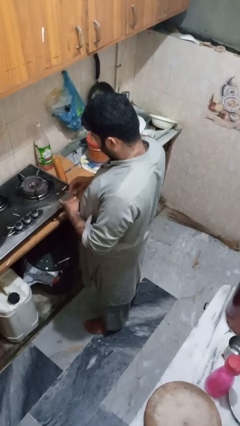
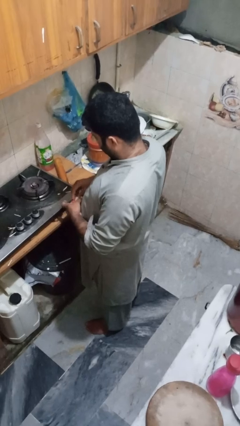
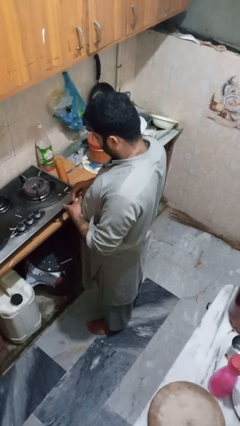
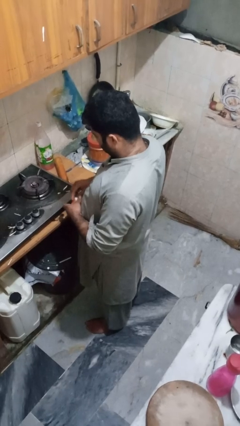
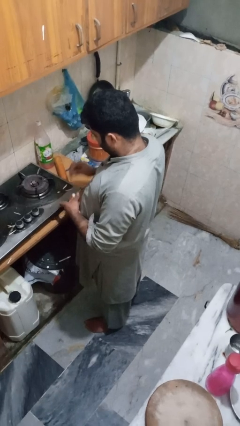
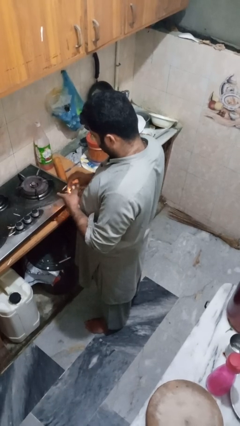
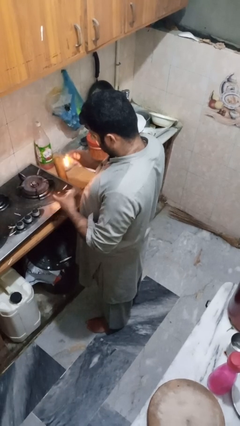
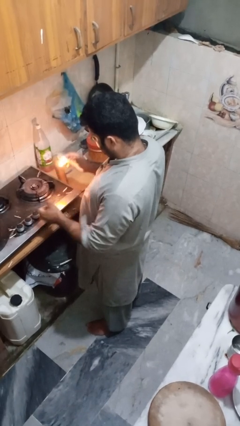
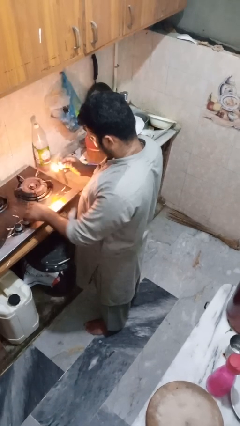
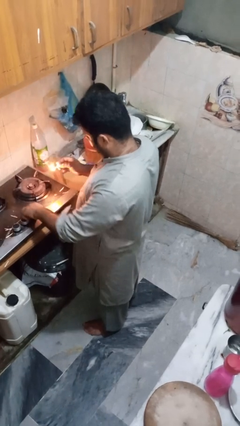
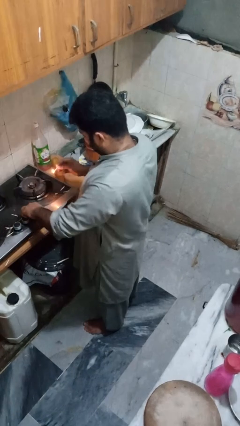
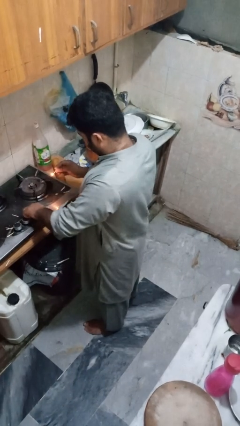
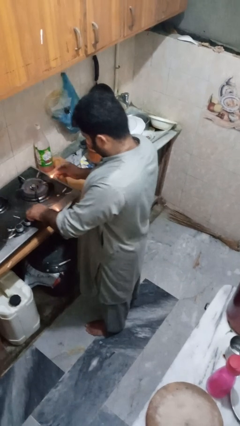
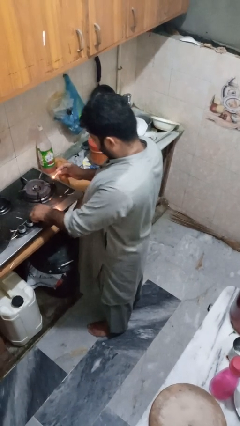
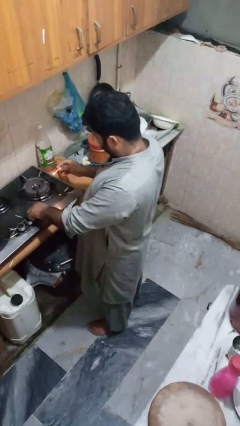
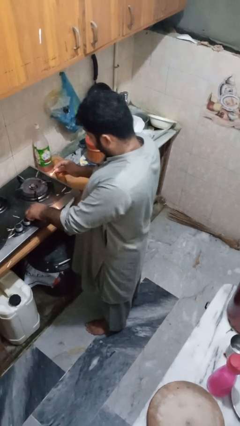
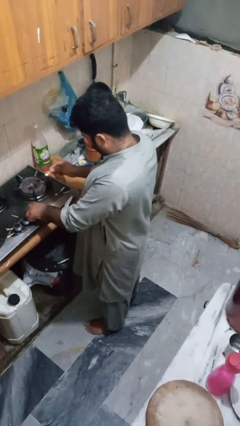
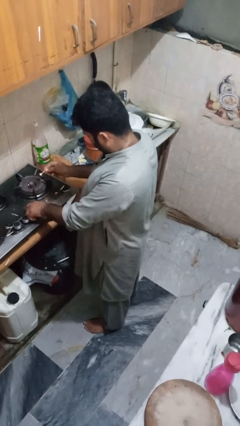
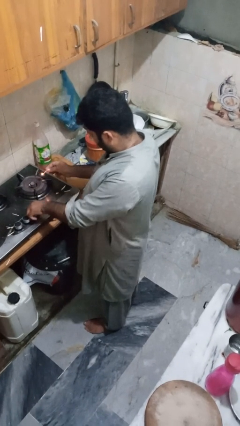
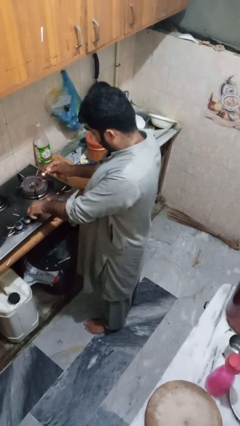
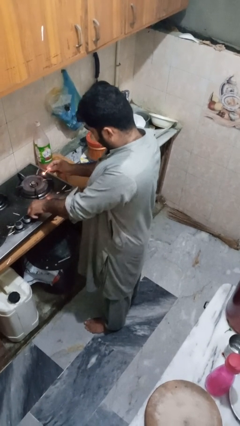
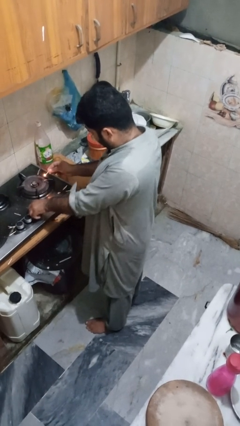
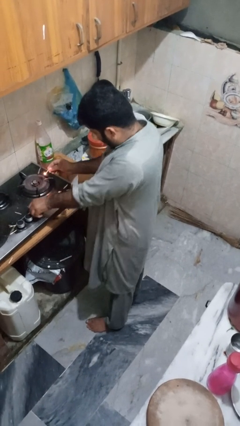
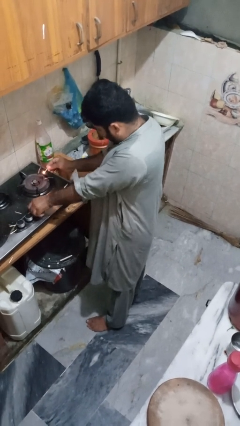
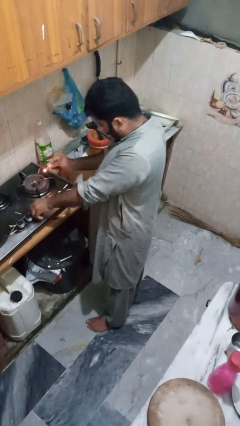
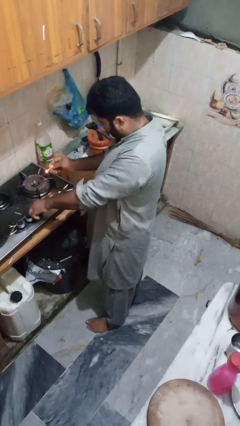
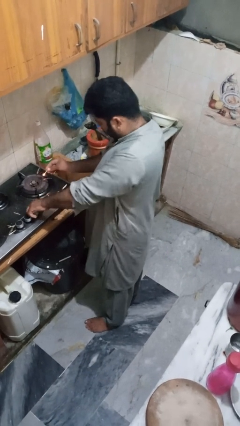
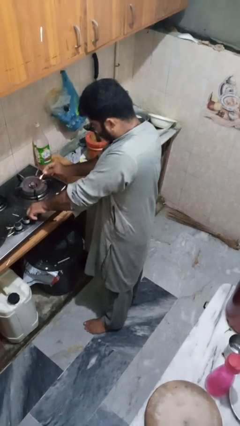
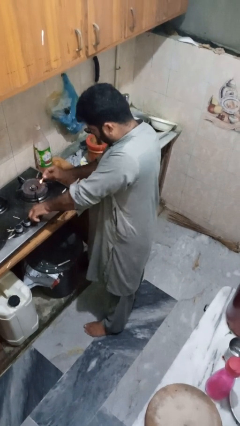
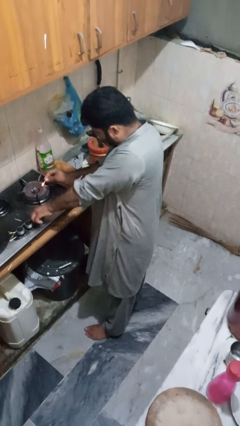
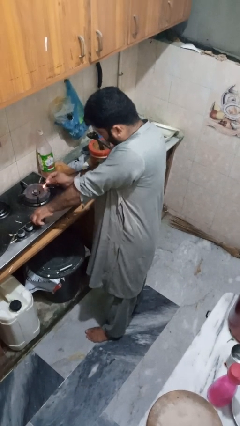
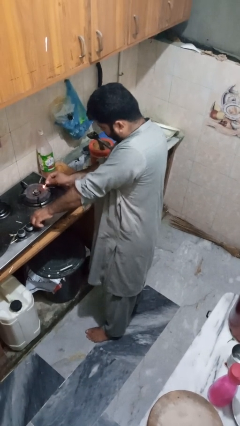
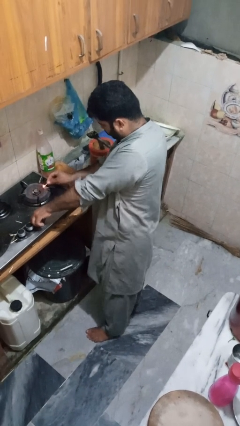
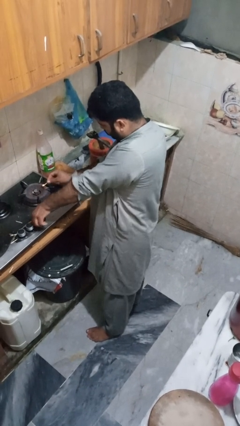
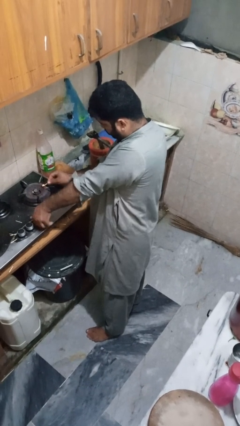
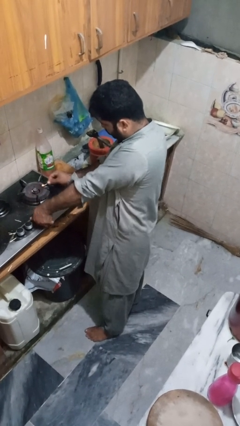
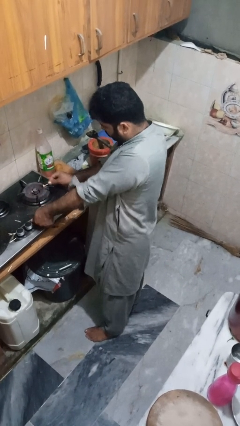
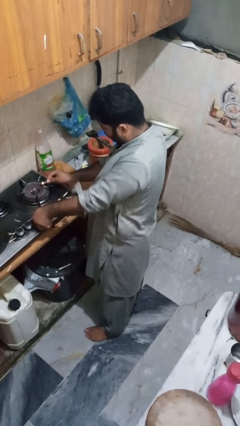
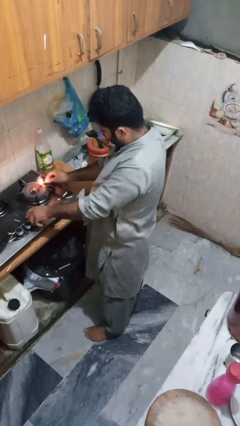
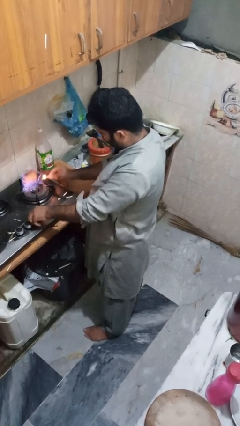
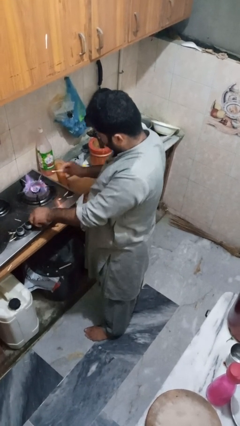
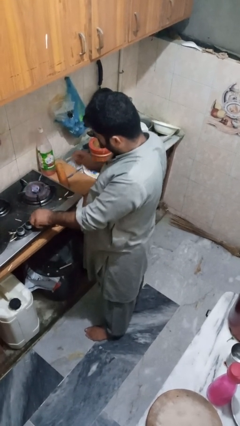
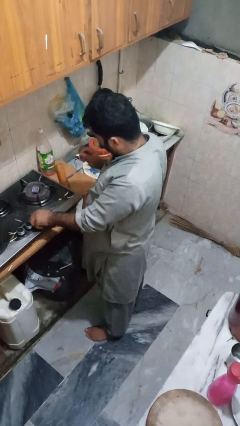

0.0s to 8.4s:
person turns on stovetop

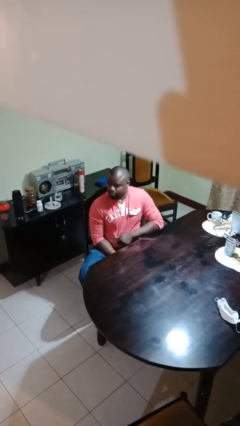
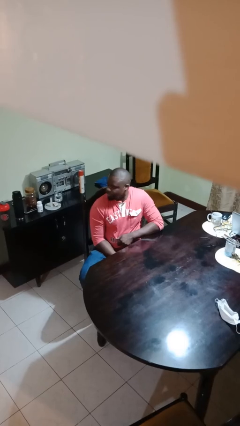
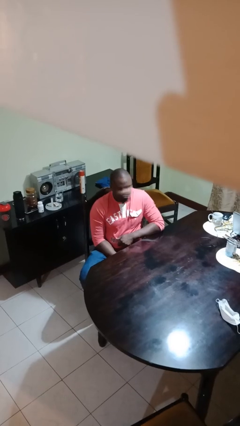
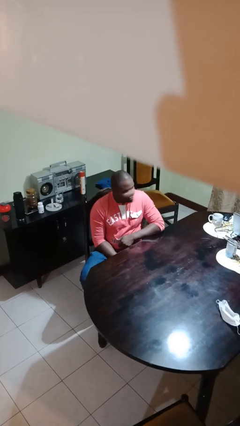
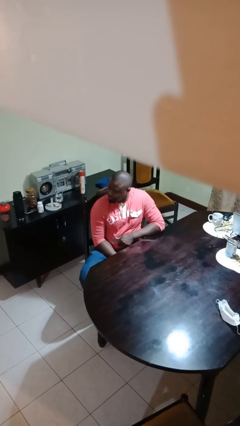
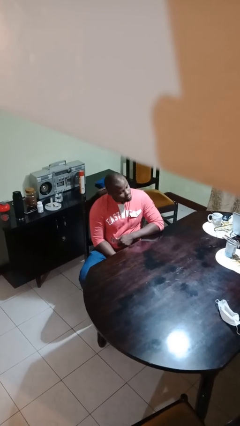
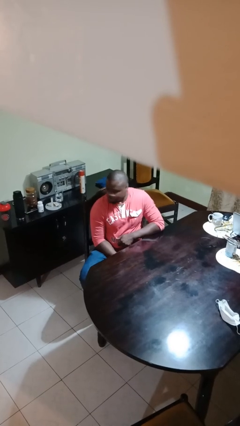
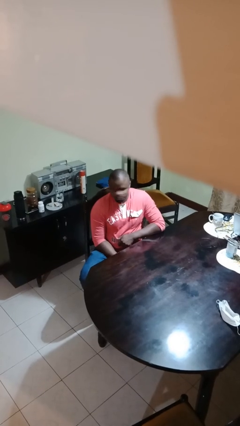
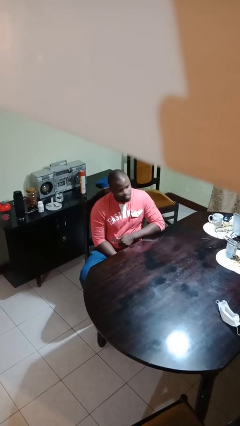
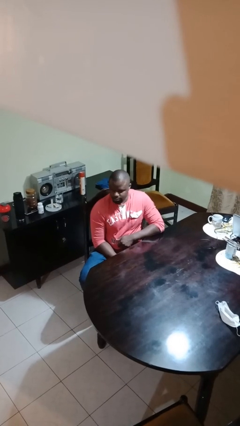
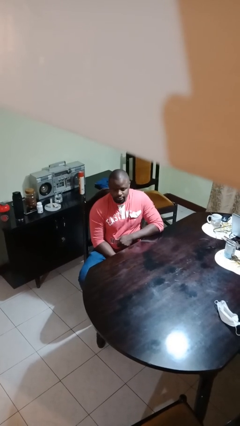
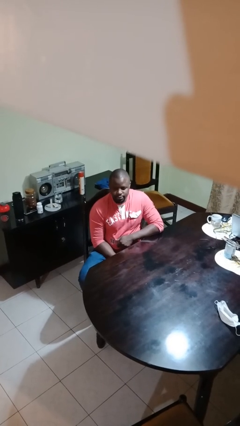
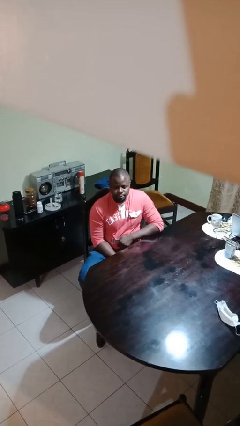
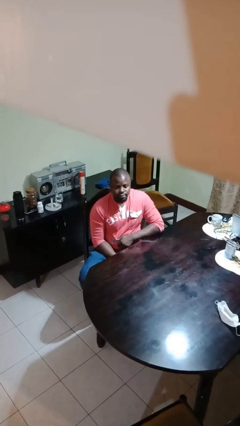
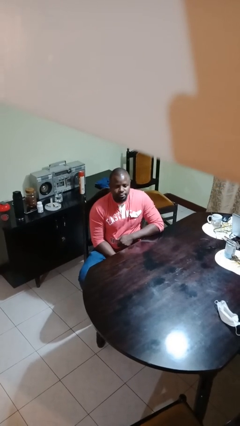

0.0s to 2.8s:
person shakes head

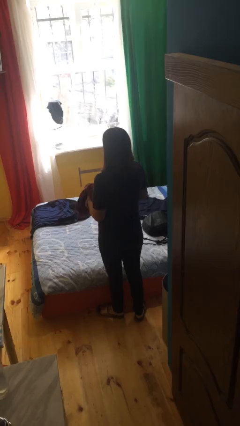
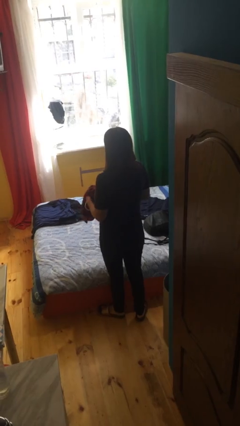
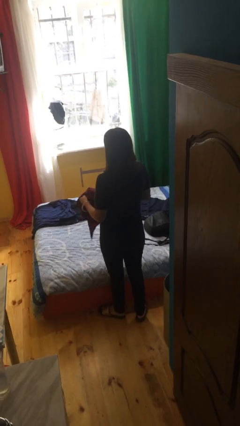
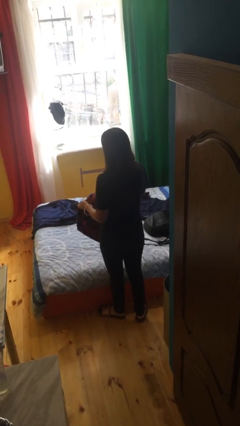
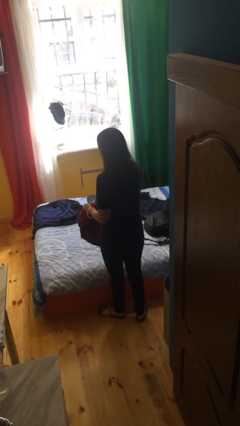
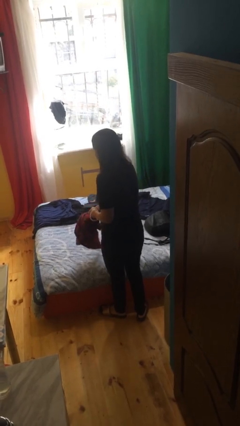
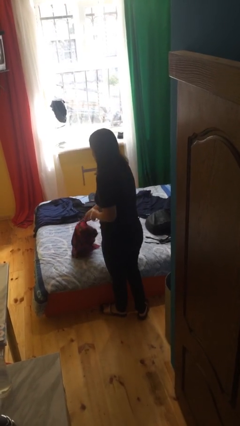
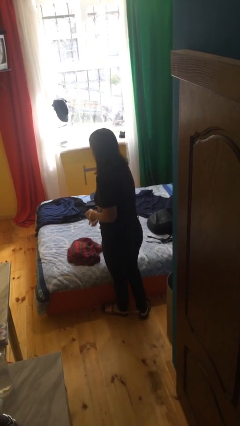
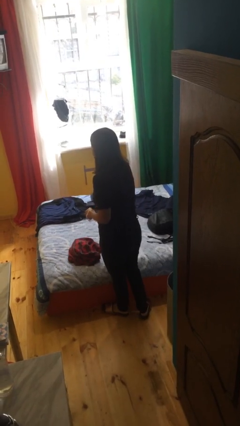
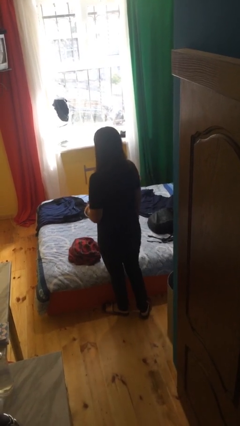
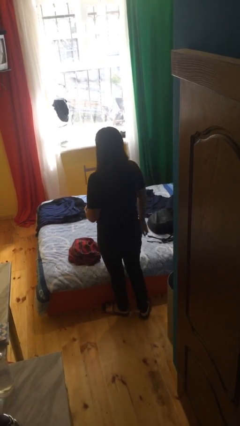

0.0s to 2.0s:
person puts down object on bed

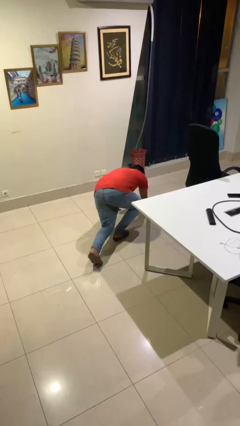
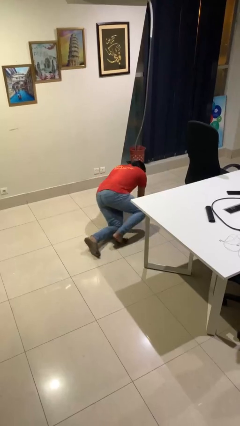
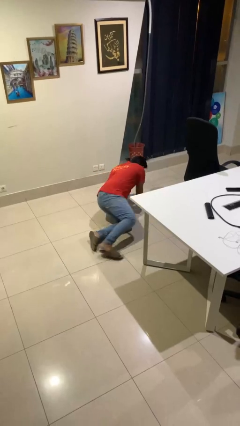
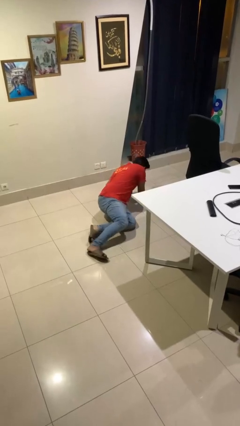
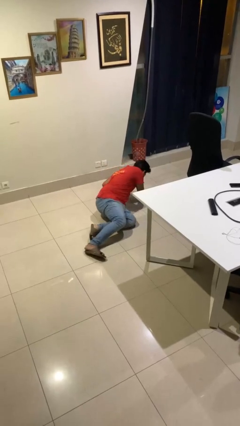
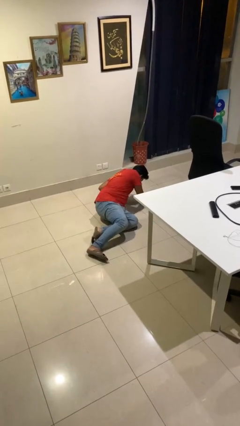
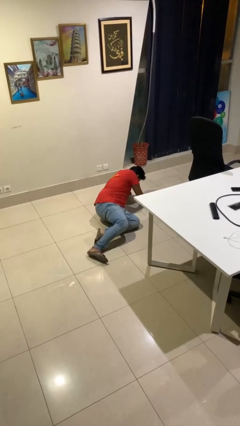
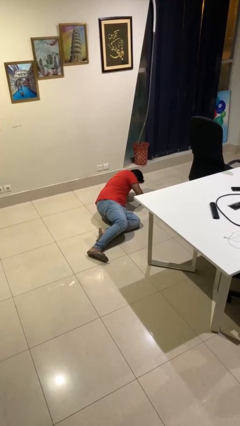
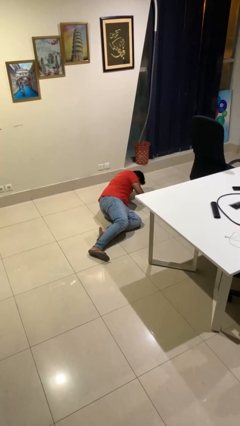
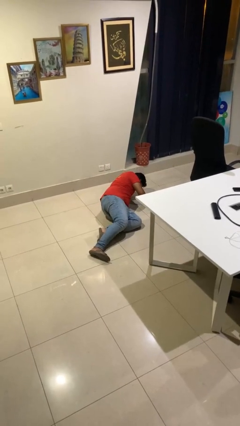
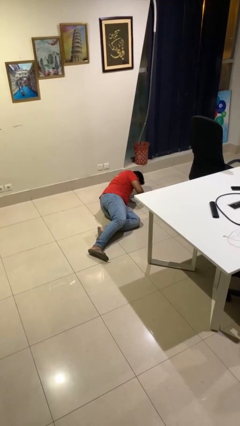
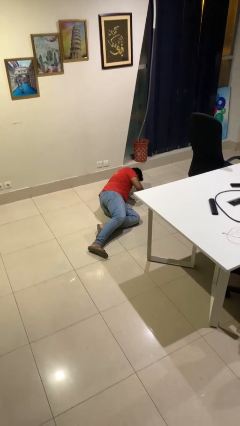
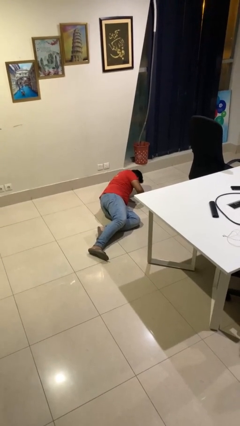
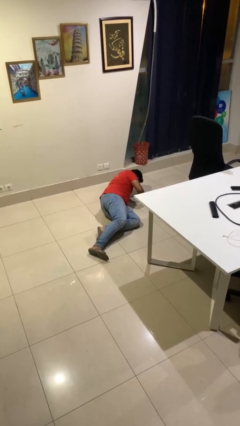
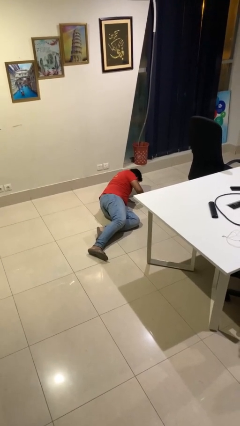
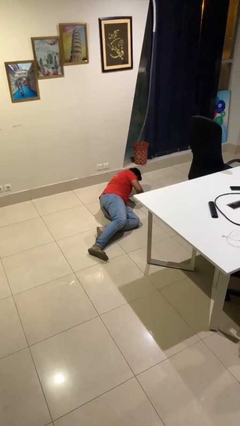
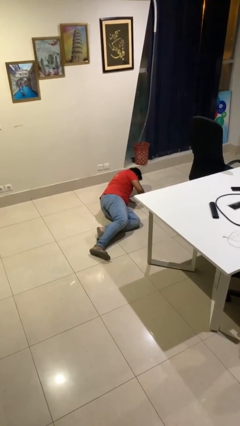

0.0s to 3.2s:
person lies down on floor

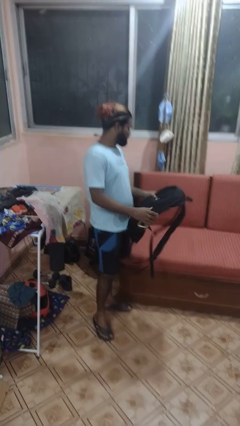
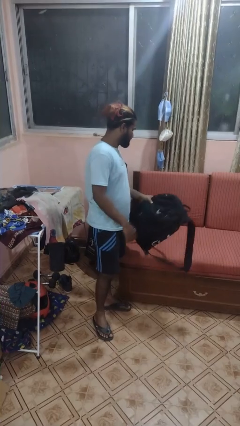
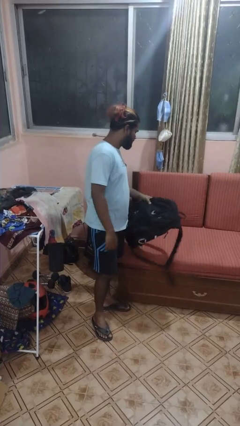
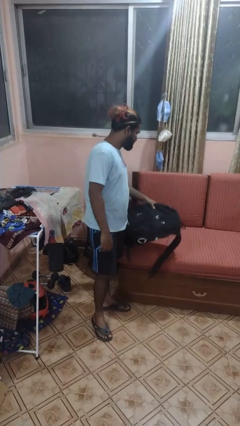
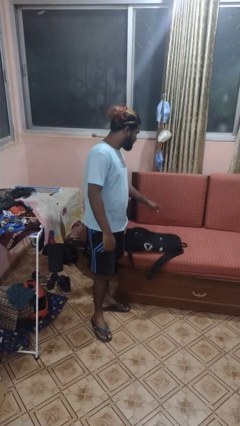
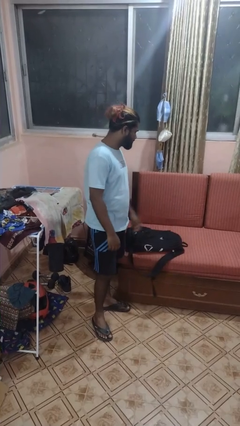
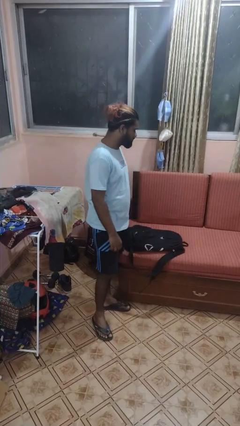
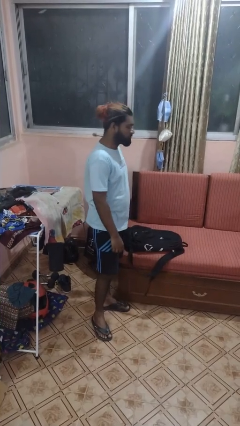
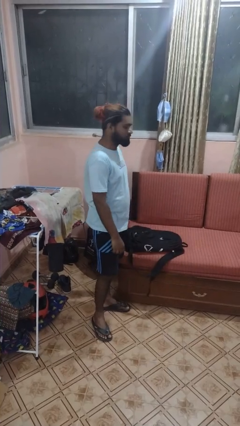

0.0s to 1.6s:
person puts down object on couch

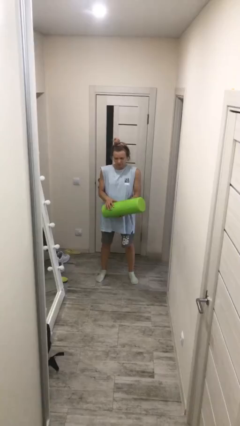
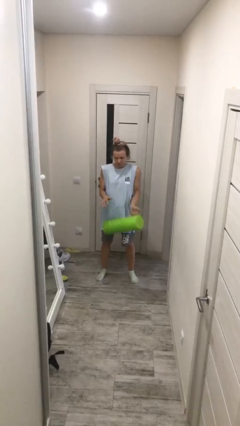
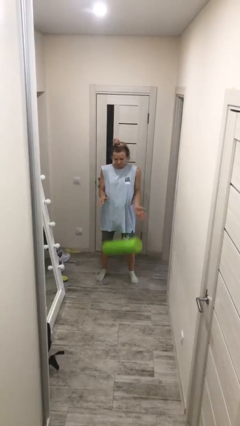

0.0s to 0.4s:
person drops object
